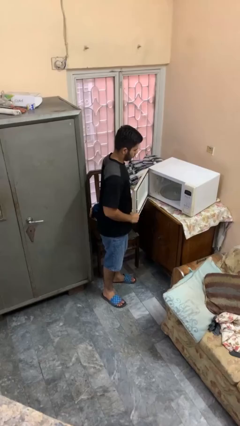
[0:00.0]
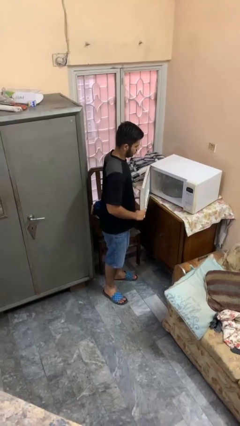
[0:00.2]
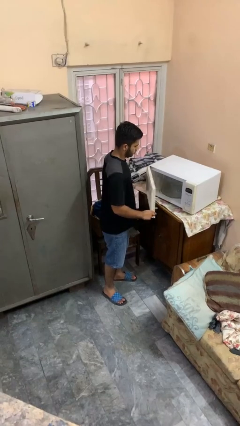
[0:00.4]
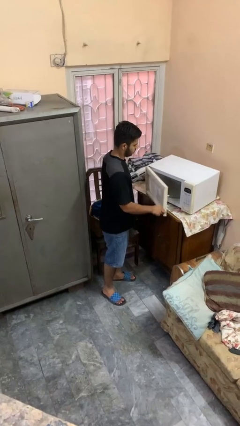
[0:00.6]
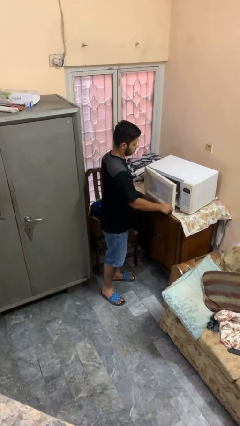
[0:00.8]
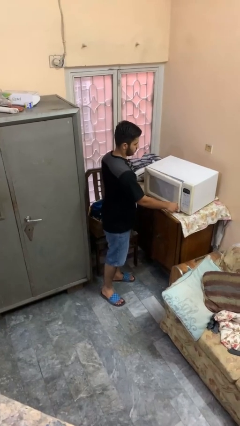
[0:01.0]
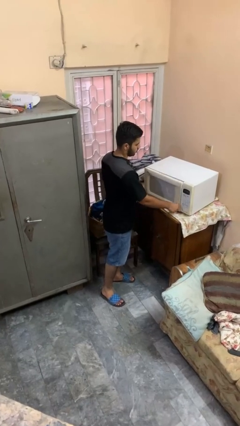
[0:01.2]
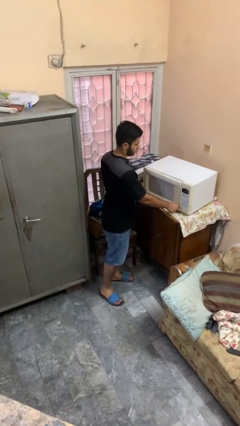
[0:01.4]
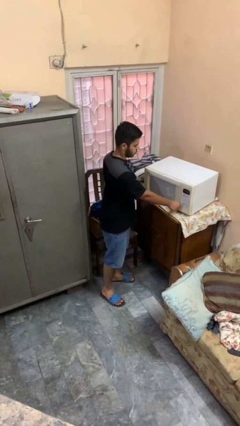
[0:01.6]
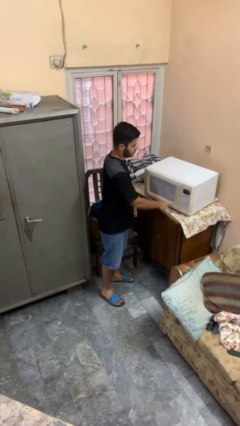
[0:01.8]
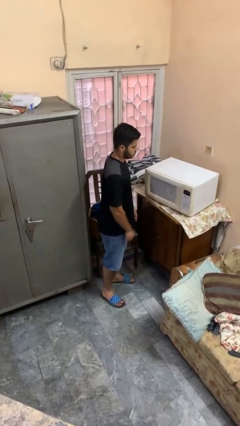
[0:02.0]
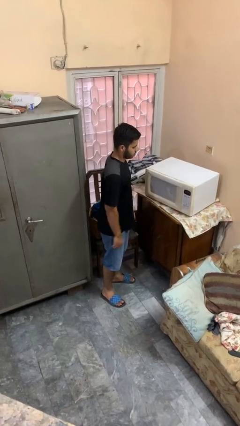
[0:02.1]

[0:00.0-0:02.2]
person closes microwave

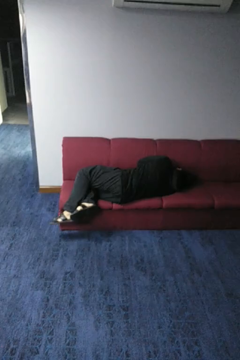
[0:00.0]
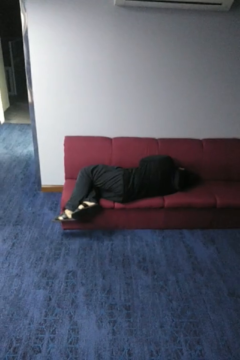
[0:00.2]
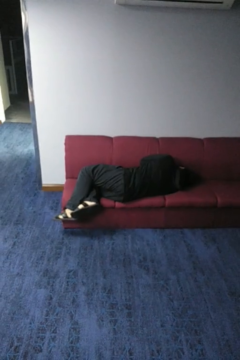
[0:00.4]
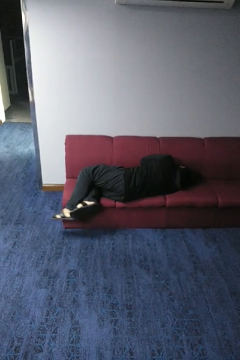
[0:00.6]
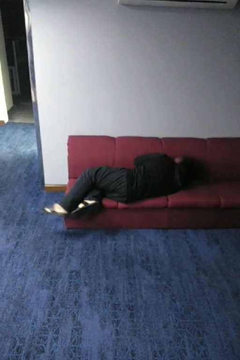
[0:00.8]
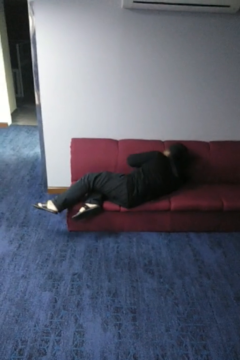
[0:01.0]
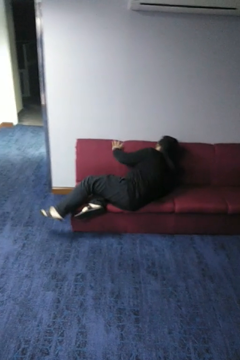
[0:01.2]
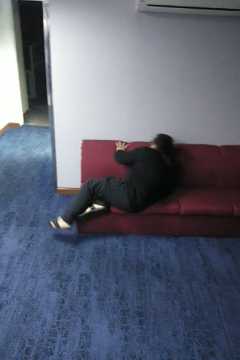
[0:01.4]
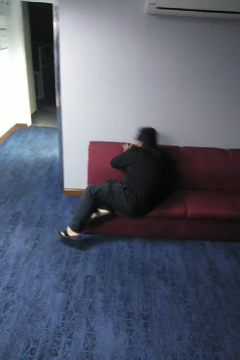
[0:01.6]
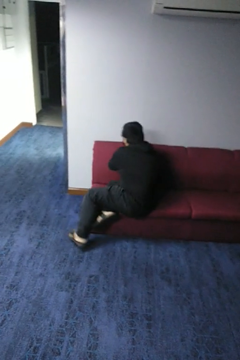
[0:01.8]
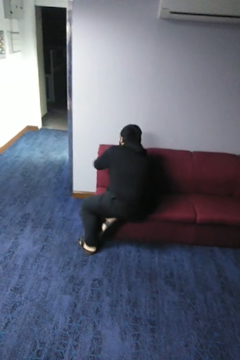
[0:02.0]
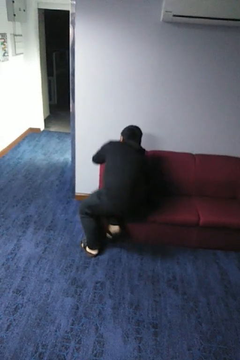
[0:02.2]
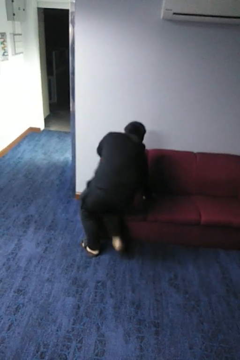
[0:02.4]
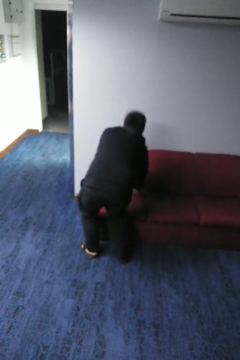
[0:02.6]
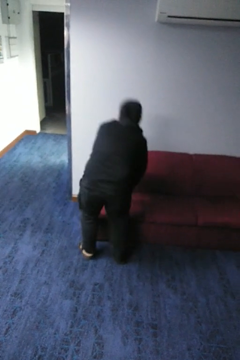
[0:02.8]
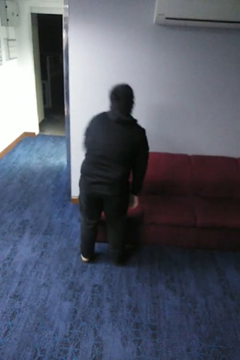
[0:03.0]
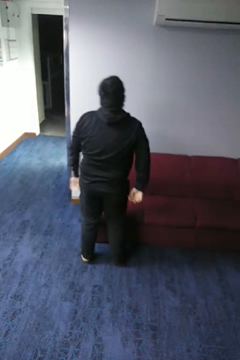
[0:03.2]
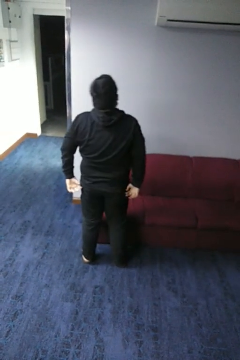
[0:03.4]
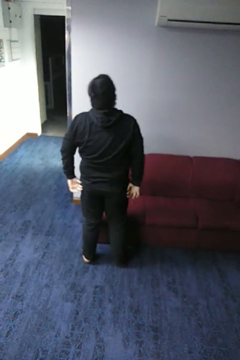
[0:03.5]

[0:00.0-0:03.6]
person stands up

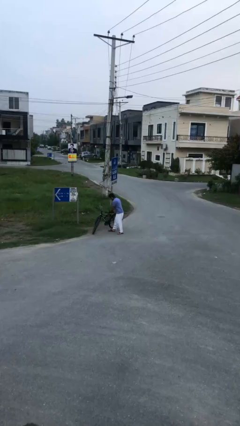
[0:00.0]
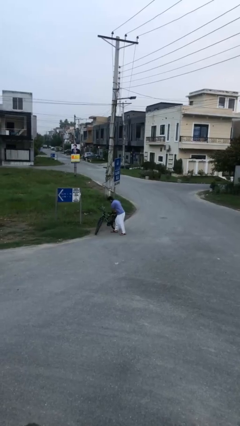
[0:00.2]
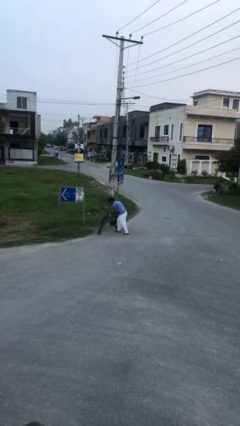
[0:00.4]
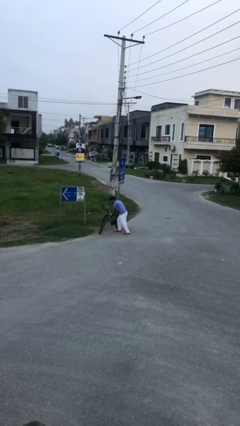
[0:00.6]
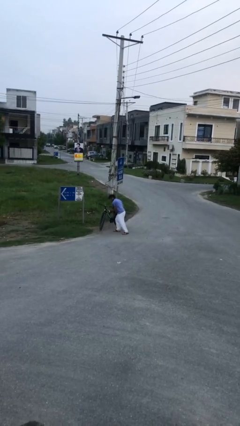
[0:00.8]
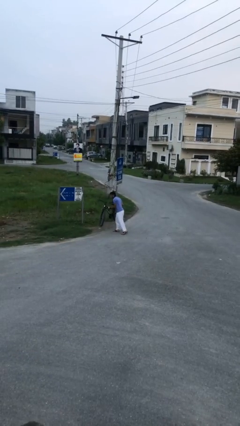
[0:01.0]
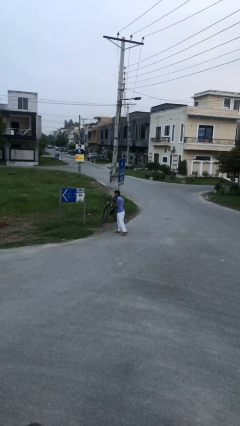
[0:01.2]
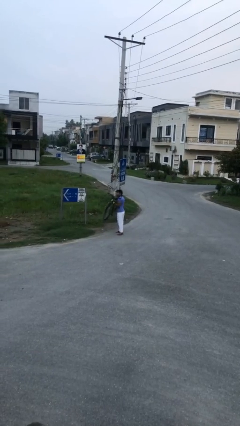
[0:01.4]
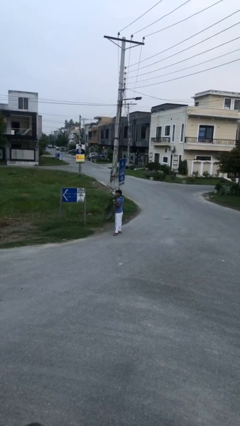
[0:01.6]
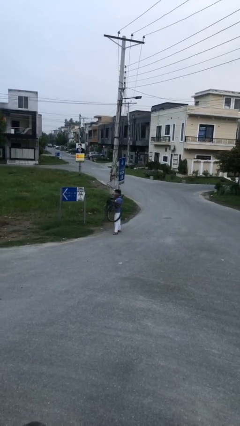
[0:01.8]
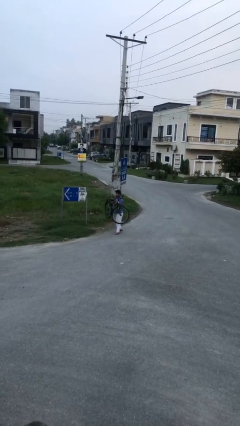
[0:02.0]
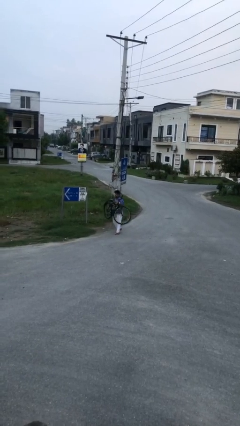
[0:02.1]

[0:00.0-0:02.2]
person picks up object from floor

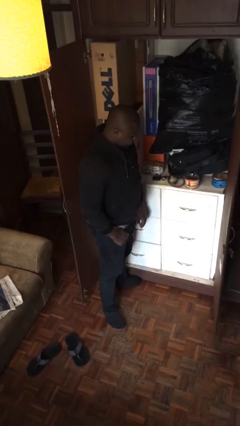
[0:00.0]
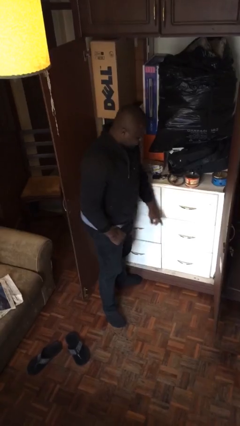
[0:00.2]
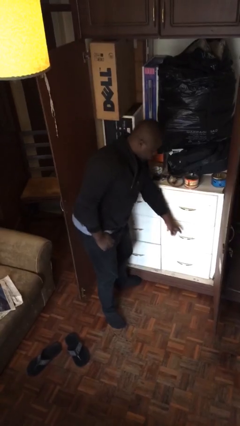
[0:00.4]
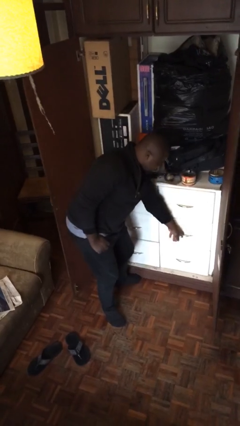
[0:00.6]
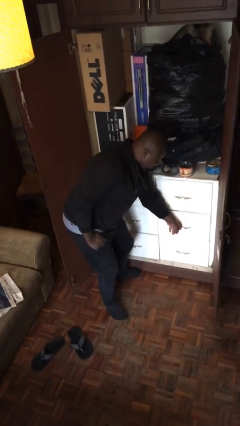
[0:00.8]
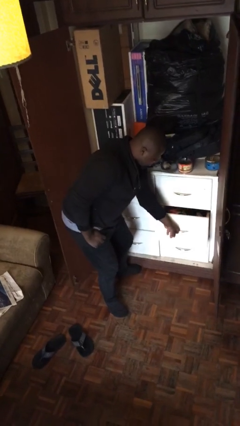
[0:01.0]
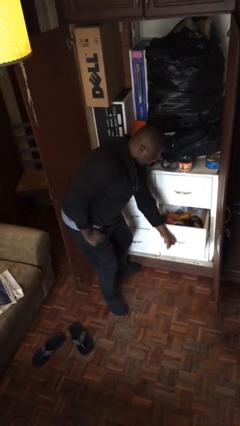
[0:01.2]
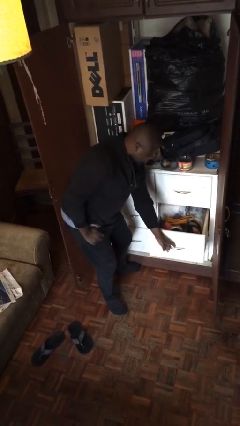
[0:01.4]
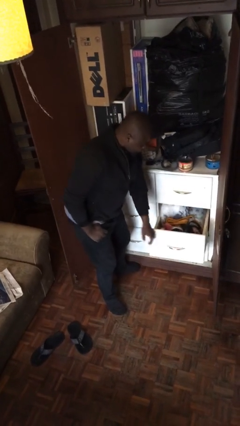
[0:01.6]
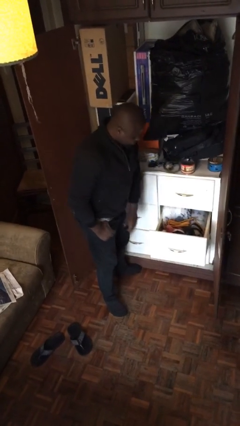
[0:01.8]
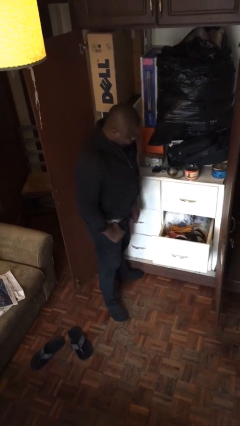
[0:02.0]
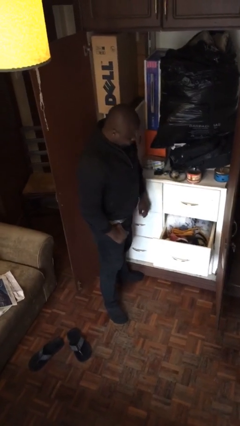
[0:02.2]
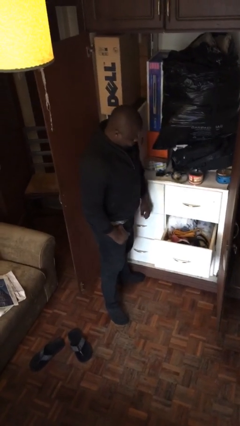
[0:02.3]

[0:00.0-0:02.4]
person opens dresser drawer

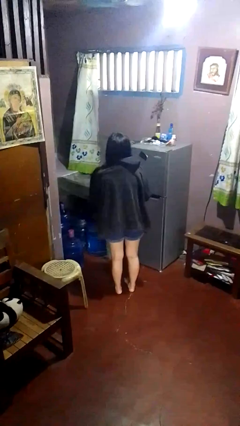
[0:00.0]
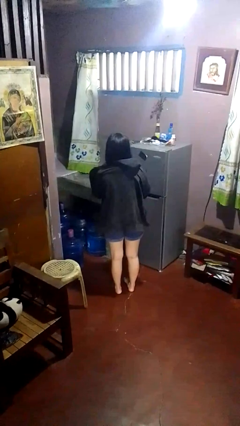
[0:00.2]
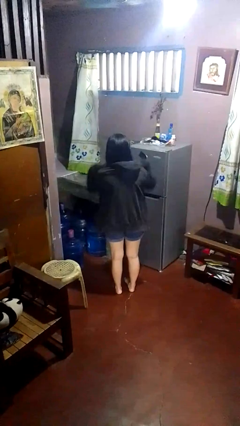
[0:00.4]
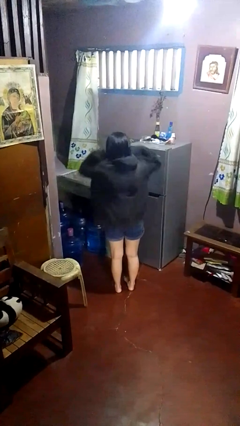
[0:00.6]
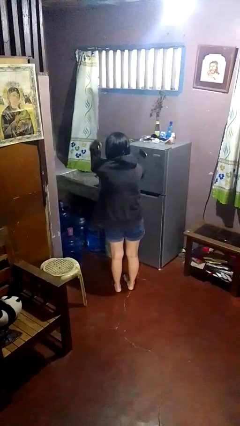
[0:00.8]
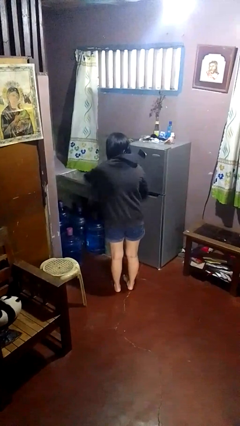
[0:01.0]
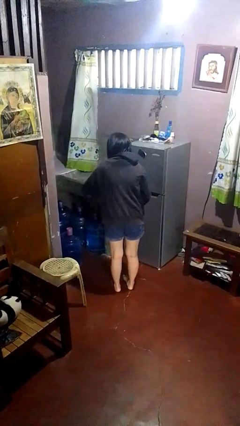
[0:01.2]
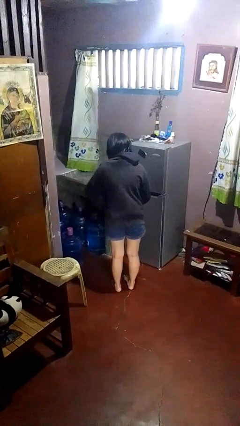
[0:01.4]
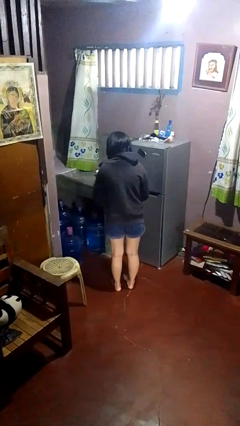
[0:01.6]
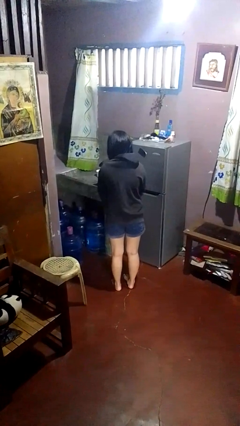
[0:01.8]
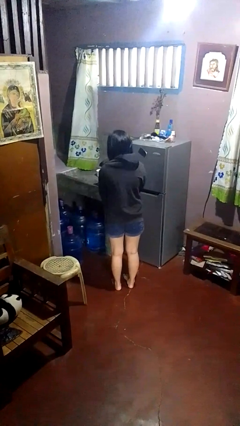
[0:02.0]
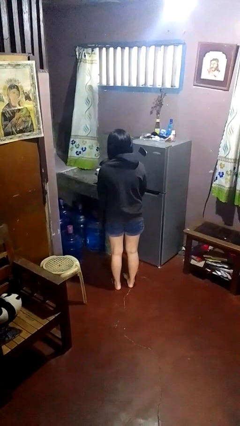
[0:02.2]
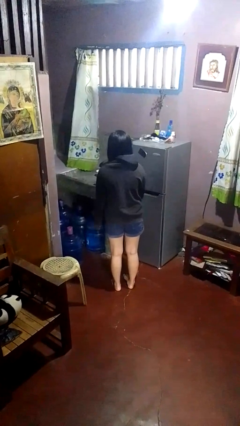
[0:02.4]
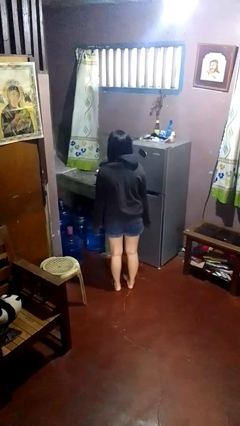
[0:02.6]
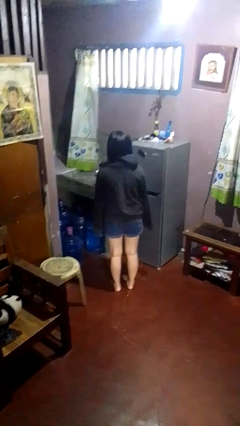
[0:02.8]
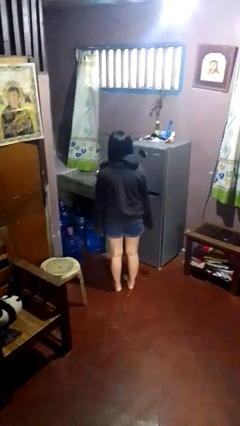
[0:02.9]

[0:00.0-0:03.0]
person zips up jacket

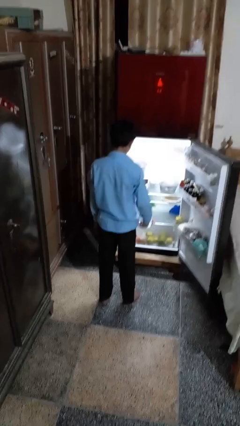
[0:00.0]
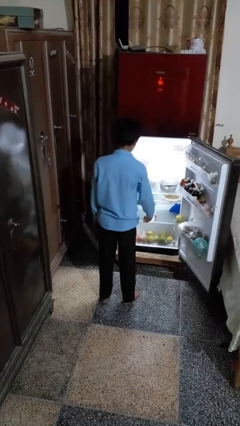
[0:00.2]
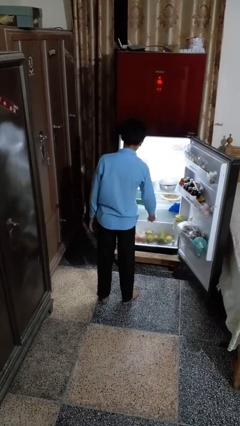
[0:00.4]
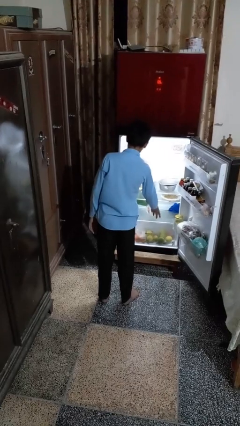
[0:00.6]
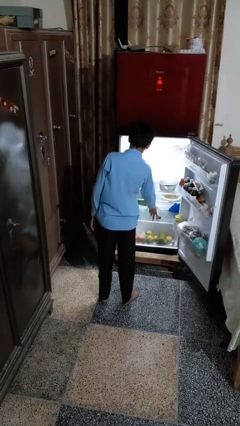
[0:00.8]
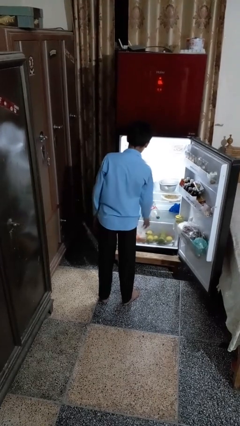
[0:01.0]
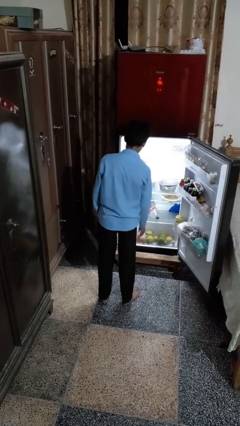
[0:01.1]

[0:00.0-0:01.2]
person puts object into refrigerator

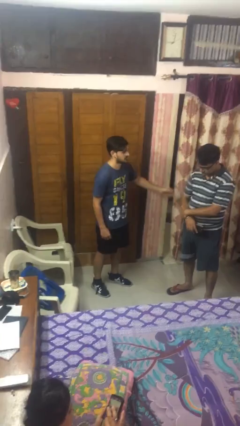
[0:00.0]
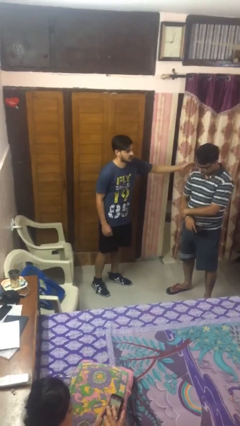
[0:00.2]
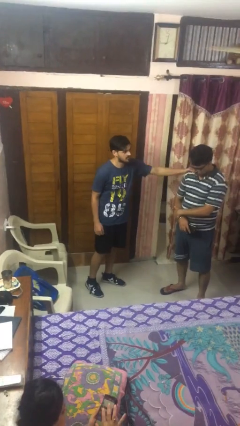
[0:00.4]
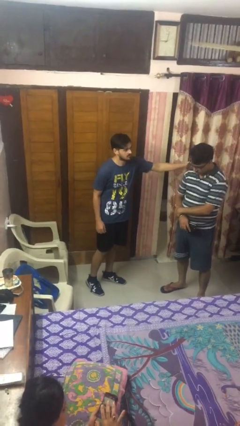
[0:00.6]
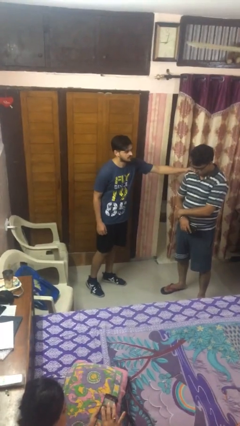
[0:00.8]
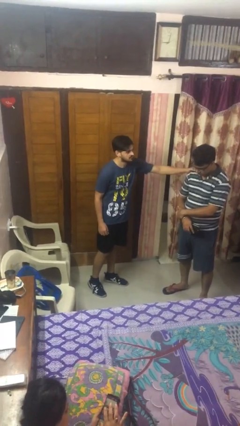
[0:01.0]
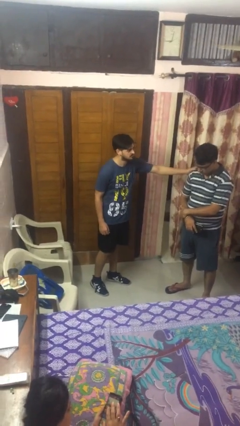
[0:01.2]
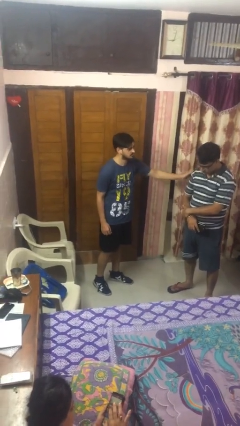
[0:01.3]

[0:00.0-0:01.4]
person pounds shoulders of person

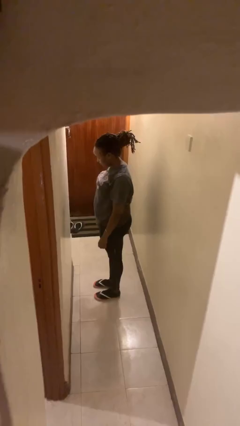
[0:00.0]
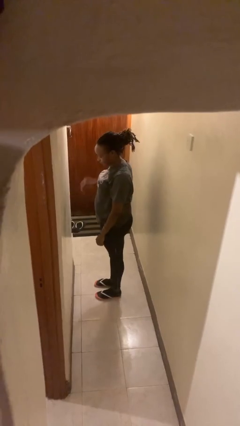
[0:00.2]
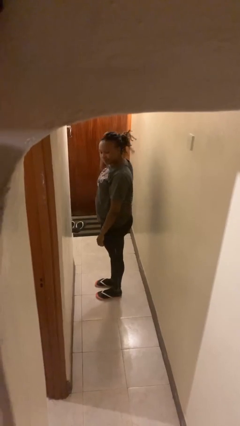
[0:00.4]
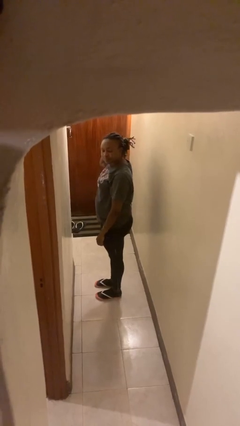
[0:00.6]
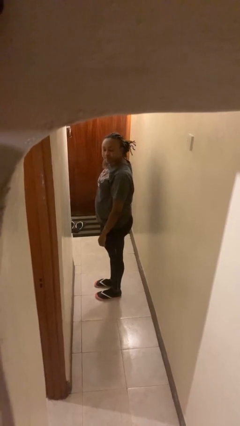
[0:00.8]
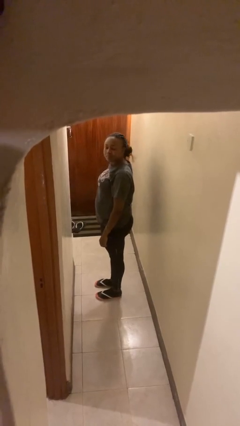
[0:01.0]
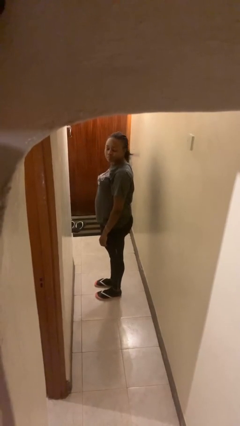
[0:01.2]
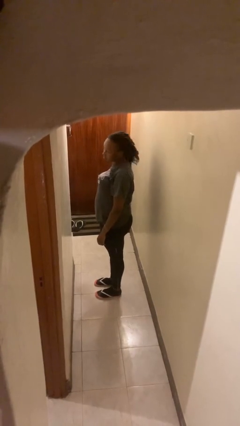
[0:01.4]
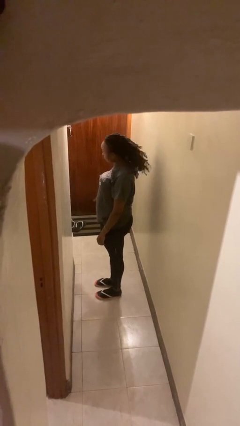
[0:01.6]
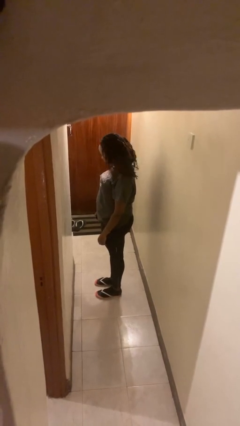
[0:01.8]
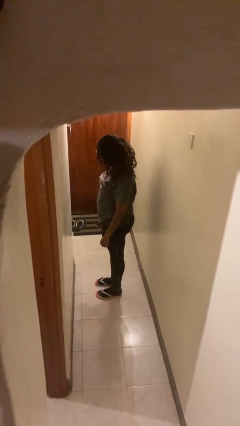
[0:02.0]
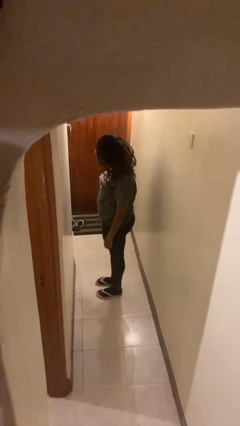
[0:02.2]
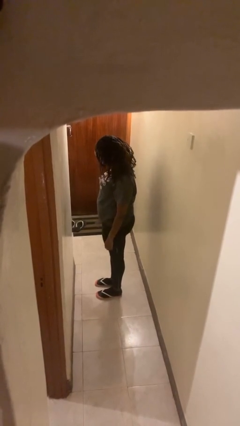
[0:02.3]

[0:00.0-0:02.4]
person takes off hairtie
